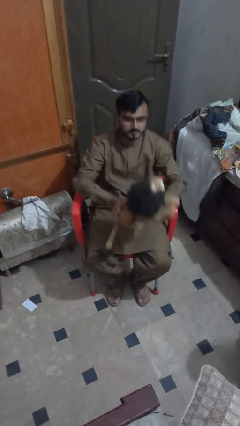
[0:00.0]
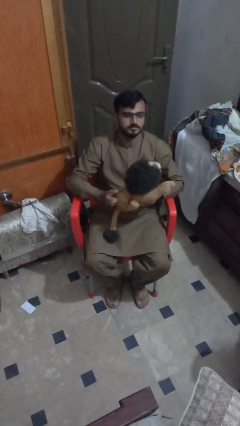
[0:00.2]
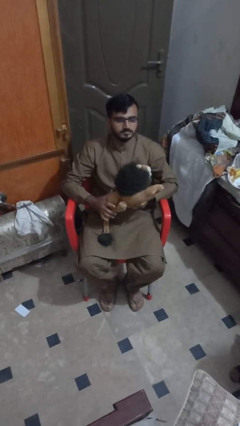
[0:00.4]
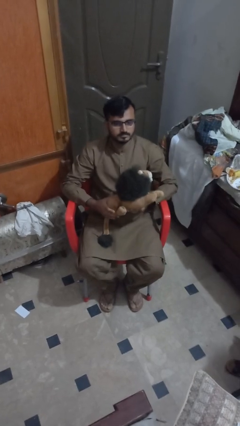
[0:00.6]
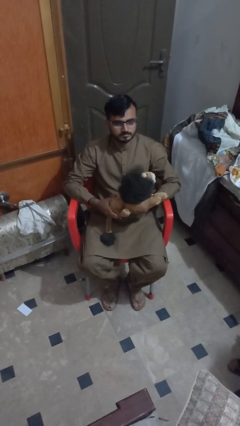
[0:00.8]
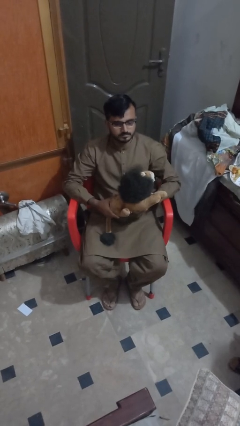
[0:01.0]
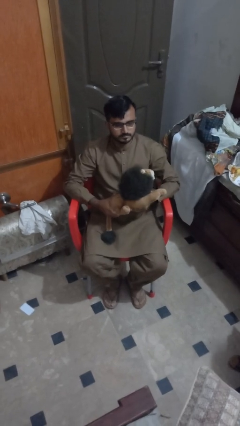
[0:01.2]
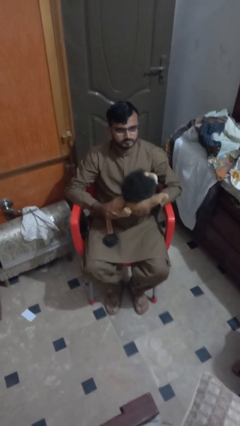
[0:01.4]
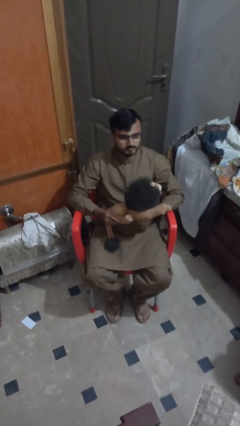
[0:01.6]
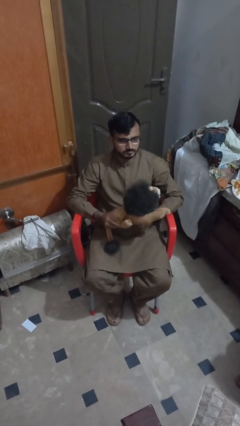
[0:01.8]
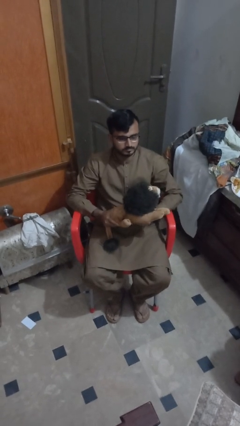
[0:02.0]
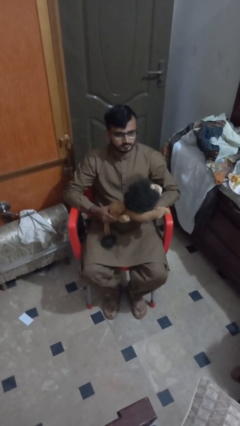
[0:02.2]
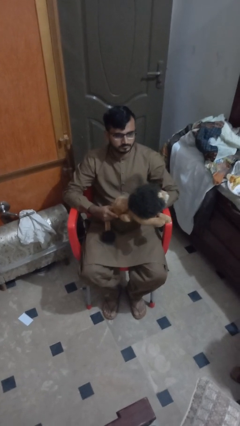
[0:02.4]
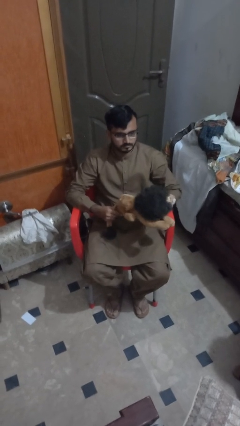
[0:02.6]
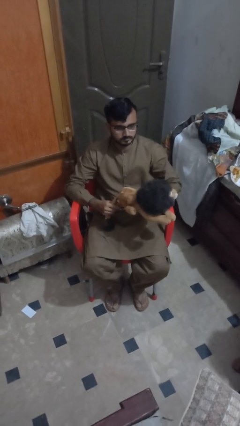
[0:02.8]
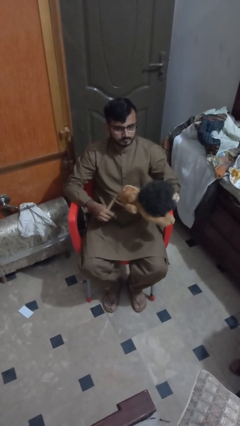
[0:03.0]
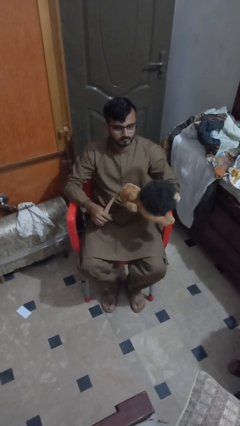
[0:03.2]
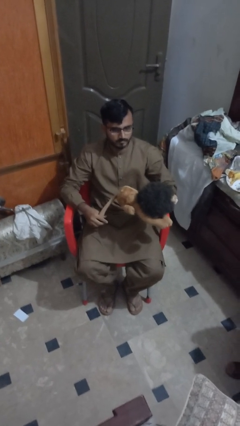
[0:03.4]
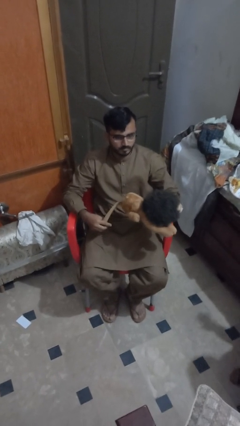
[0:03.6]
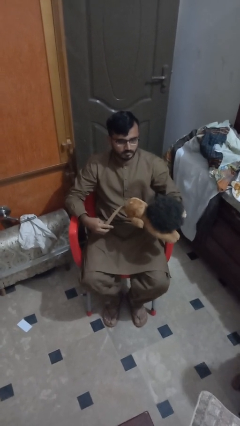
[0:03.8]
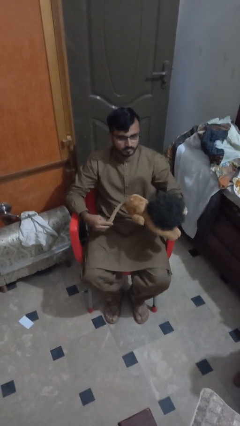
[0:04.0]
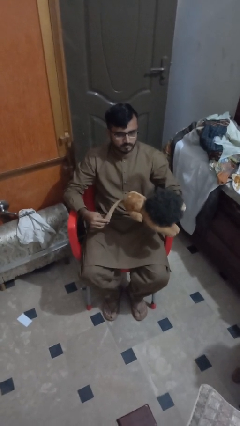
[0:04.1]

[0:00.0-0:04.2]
person picks up object from floor

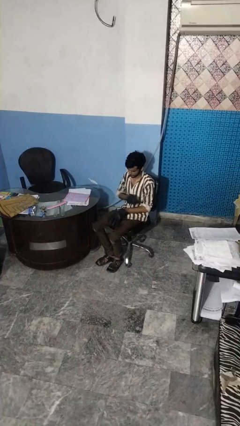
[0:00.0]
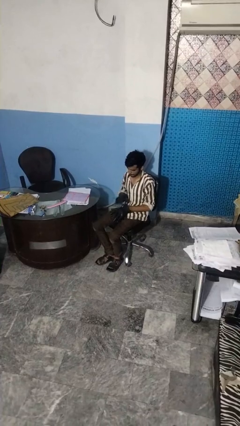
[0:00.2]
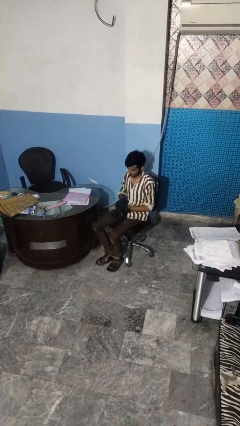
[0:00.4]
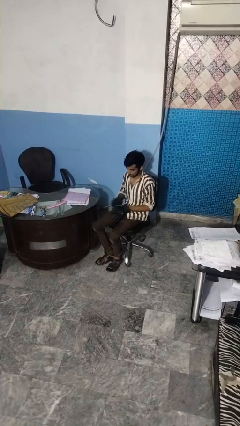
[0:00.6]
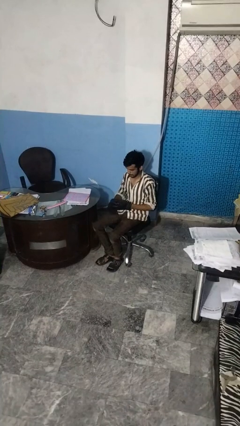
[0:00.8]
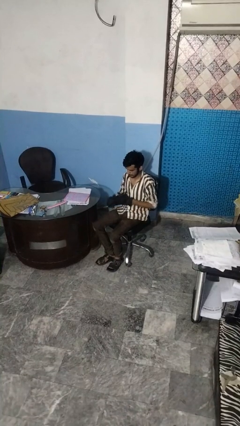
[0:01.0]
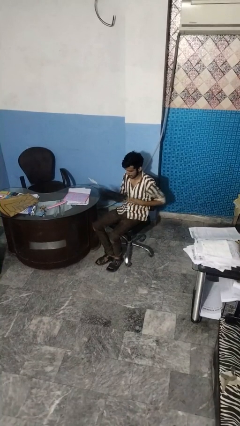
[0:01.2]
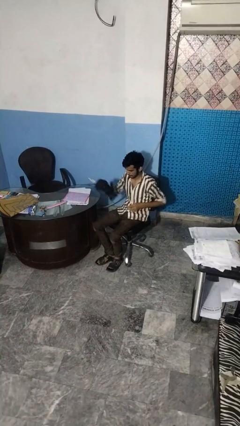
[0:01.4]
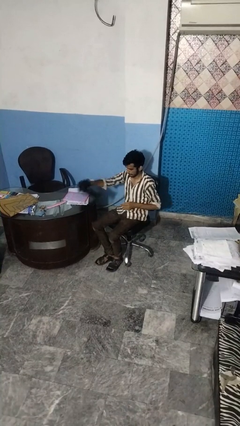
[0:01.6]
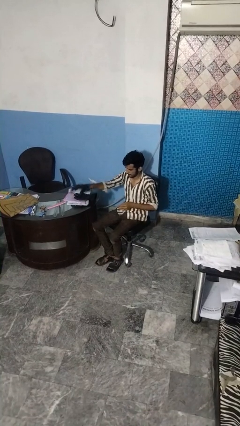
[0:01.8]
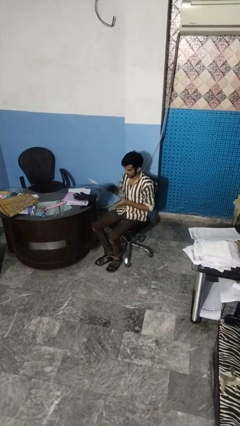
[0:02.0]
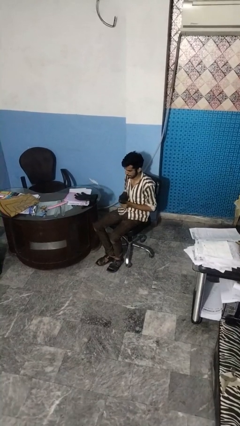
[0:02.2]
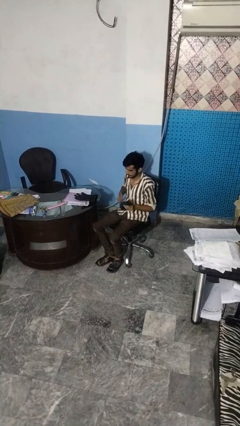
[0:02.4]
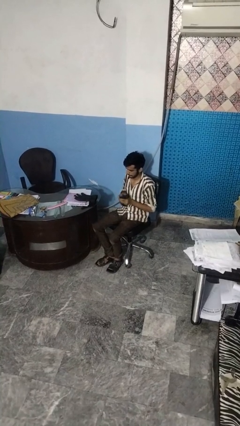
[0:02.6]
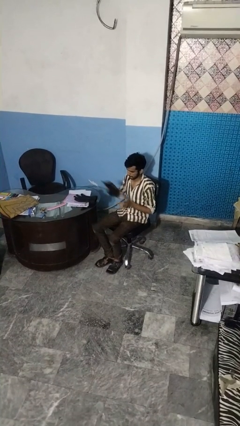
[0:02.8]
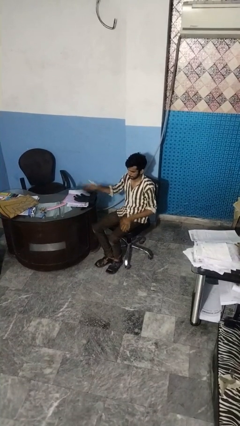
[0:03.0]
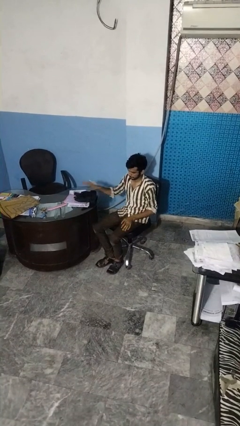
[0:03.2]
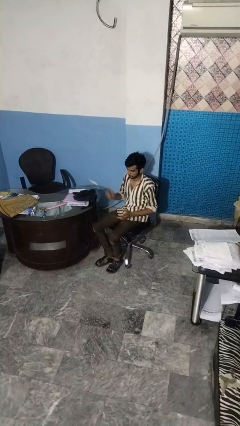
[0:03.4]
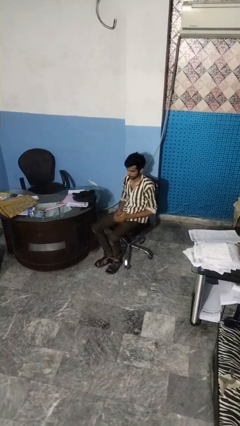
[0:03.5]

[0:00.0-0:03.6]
person takes off gloves

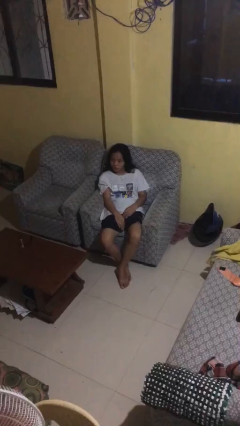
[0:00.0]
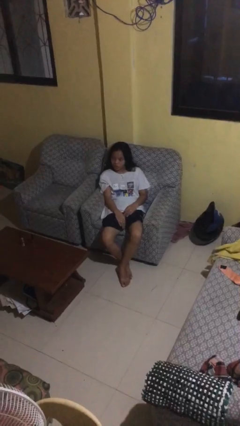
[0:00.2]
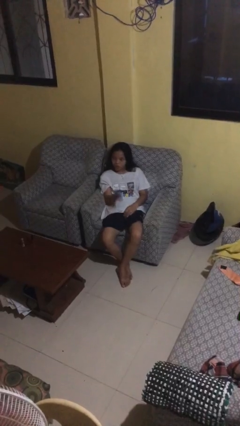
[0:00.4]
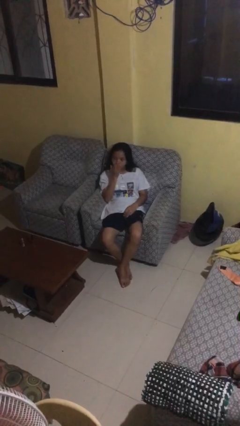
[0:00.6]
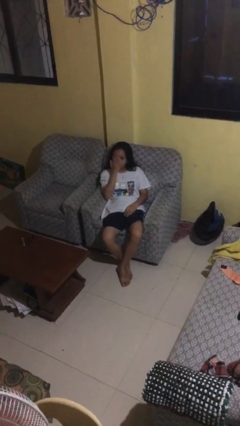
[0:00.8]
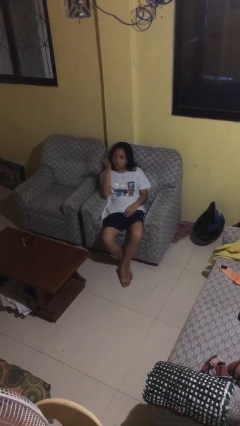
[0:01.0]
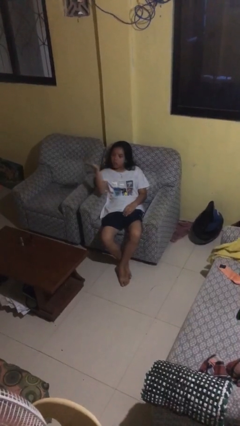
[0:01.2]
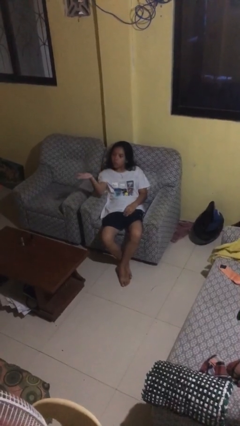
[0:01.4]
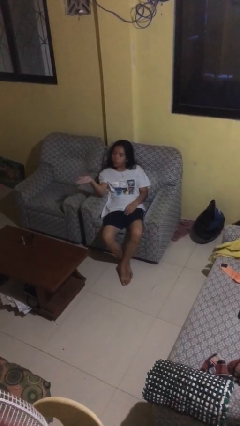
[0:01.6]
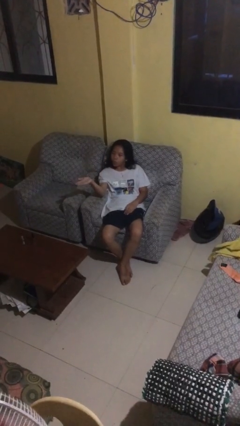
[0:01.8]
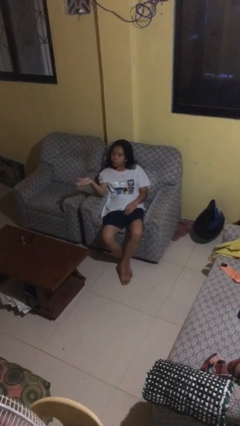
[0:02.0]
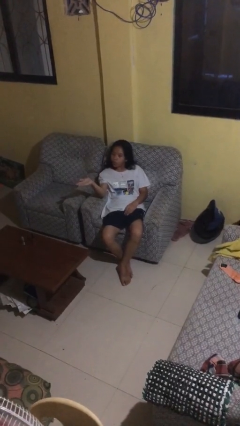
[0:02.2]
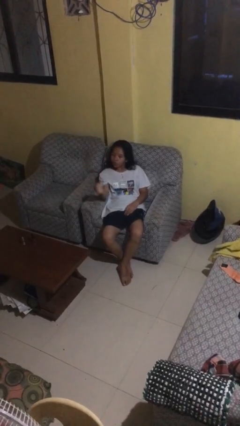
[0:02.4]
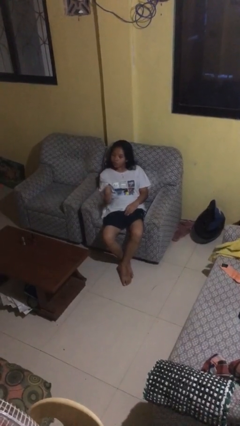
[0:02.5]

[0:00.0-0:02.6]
person gestures blow kiss

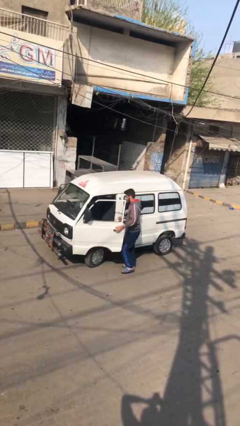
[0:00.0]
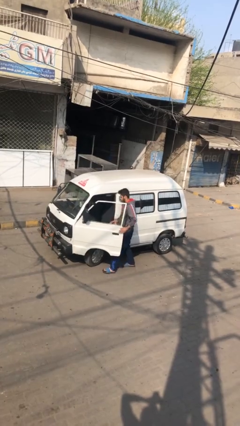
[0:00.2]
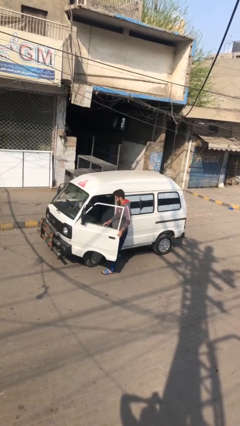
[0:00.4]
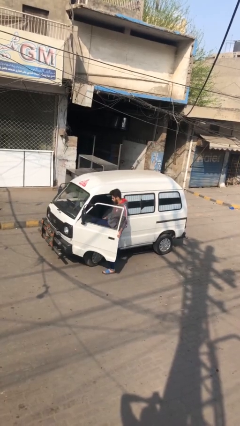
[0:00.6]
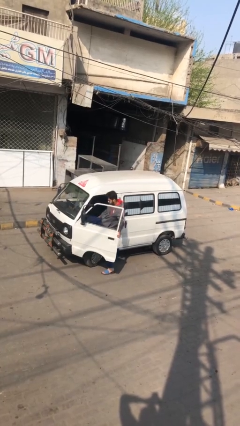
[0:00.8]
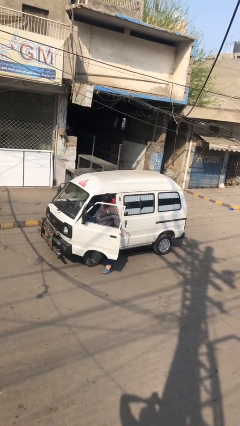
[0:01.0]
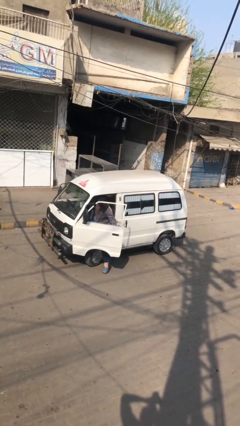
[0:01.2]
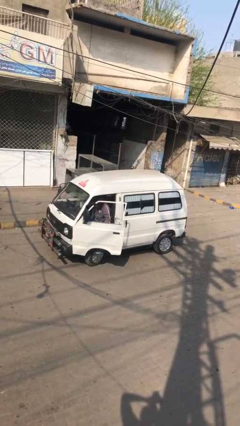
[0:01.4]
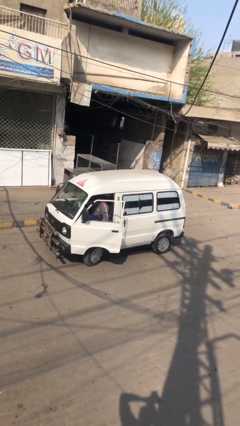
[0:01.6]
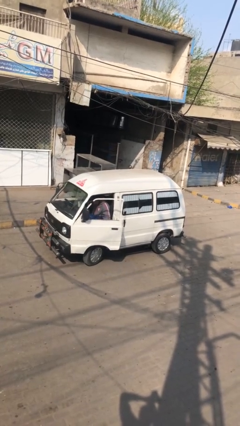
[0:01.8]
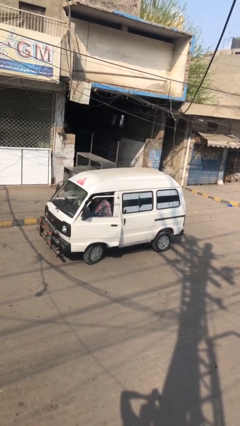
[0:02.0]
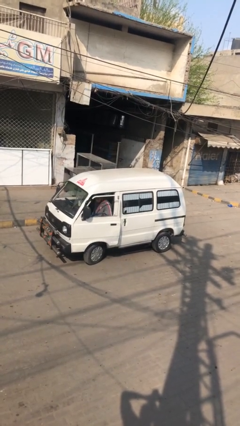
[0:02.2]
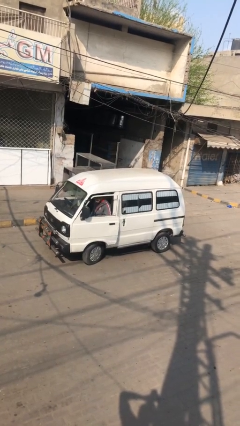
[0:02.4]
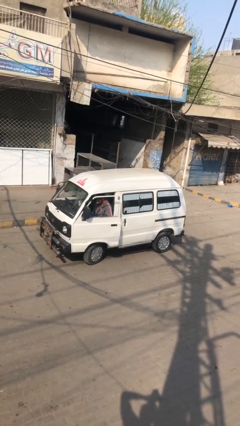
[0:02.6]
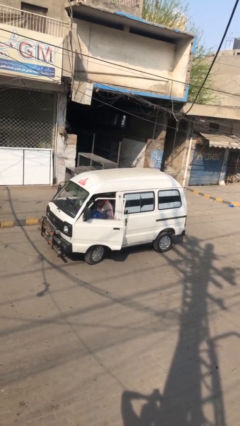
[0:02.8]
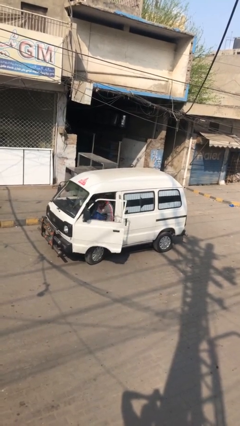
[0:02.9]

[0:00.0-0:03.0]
car picks up person

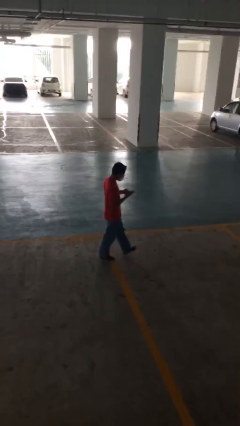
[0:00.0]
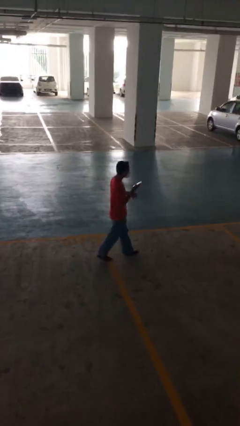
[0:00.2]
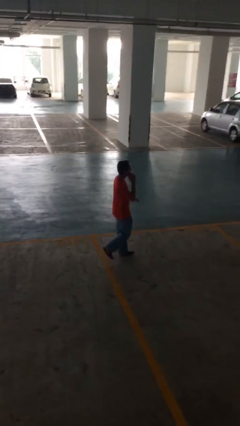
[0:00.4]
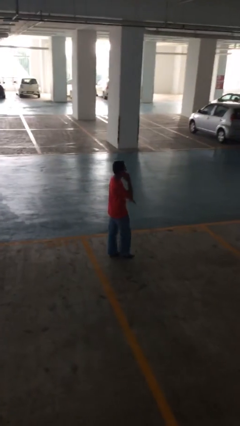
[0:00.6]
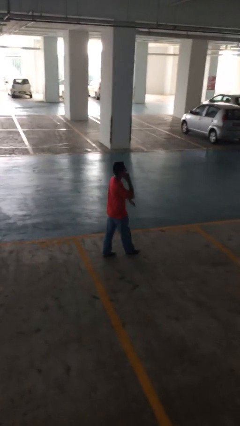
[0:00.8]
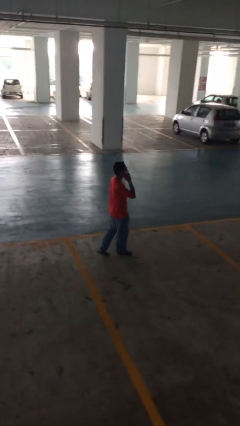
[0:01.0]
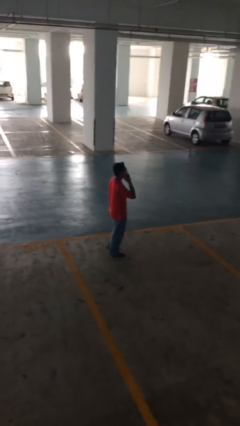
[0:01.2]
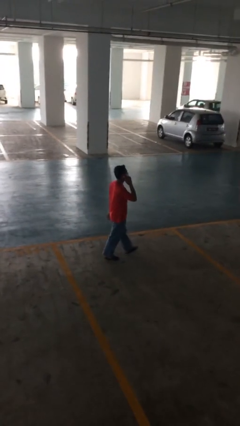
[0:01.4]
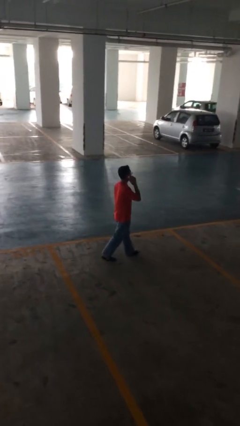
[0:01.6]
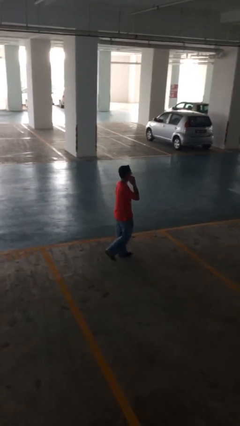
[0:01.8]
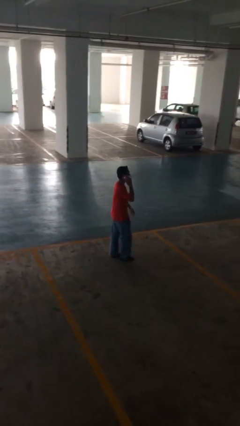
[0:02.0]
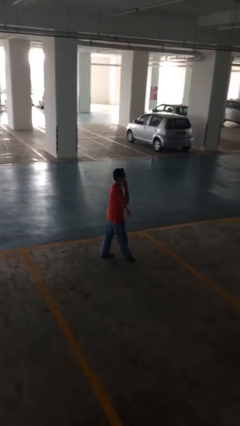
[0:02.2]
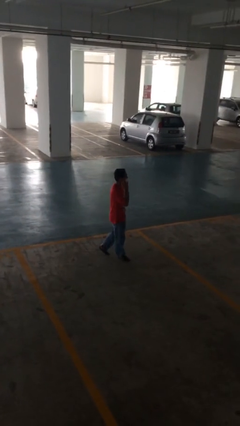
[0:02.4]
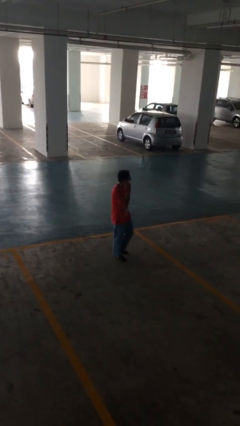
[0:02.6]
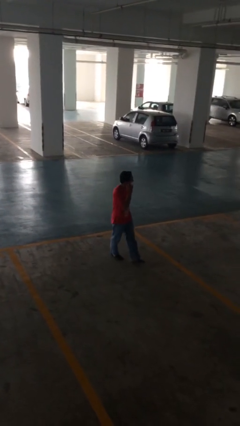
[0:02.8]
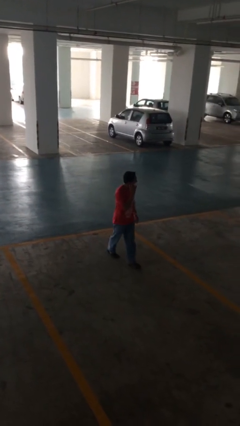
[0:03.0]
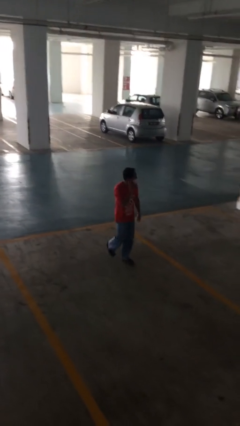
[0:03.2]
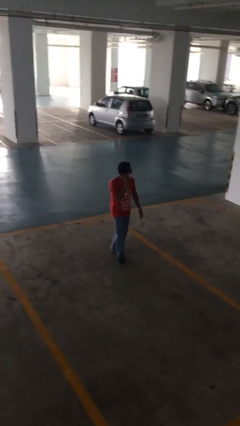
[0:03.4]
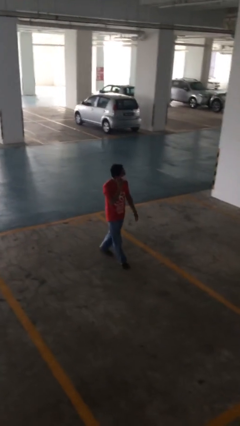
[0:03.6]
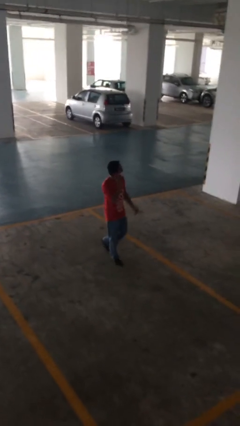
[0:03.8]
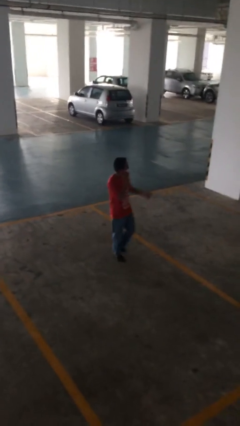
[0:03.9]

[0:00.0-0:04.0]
person talks on phone

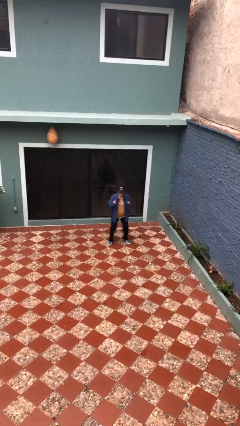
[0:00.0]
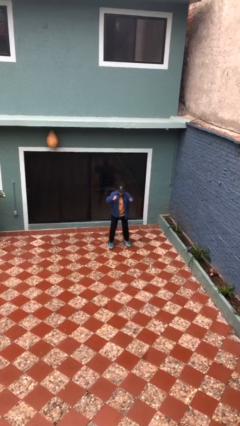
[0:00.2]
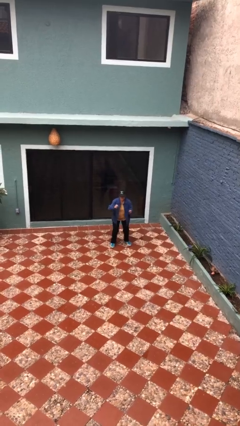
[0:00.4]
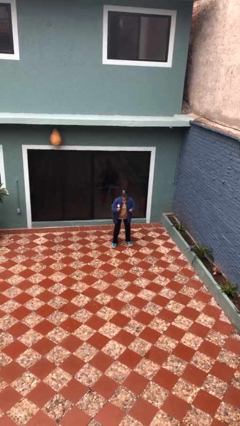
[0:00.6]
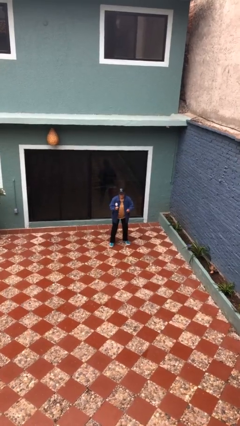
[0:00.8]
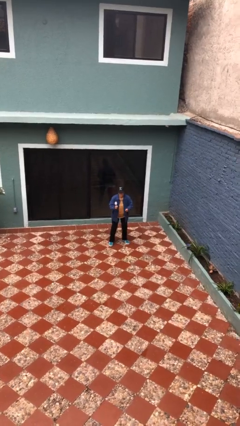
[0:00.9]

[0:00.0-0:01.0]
person jumps
